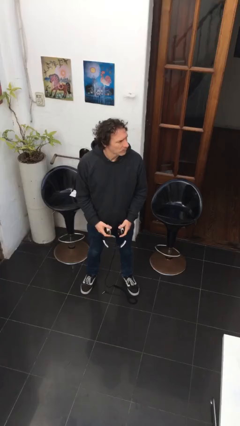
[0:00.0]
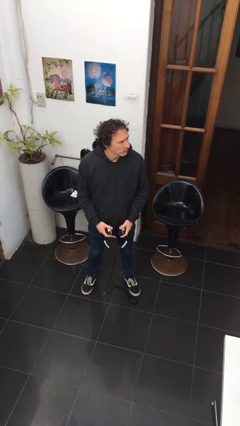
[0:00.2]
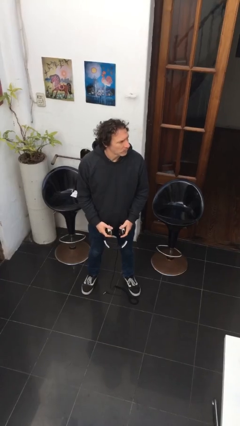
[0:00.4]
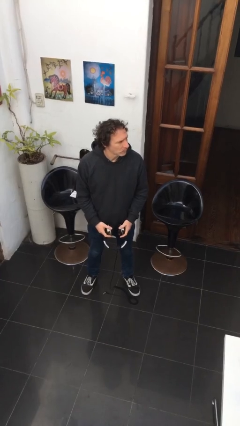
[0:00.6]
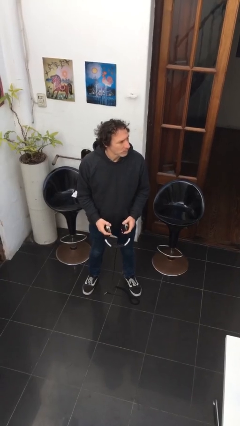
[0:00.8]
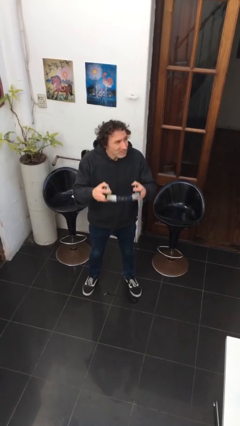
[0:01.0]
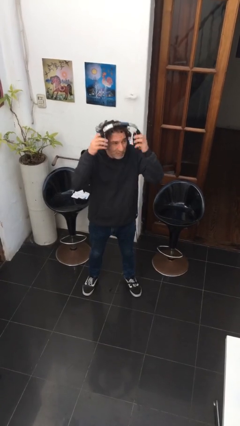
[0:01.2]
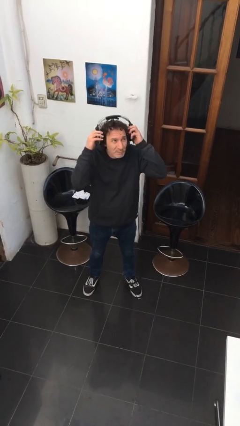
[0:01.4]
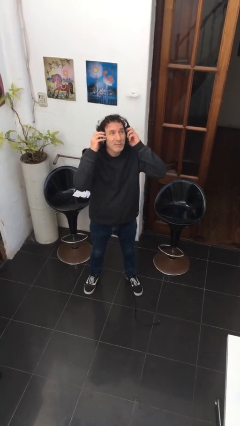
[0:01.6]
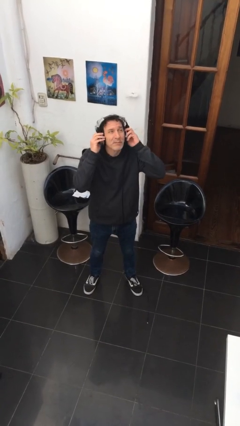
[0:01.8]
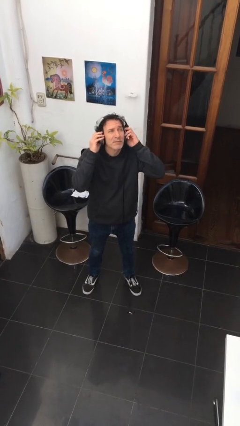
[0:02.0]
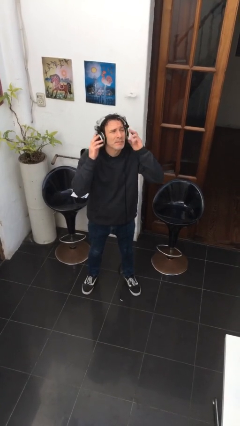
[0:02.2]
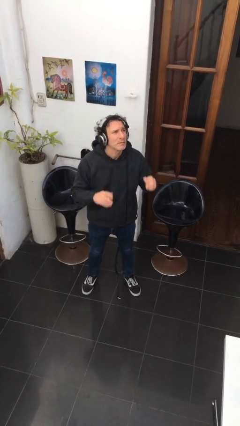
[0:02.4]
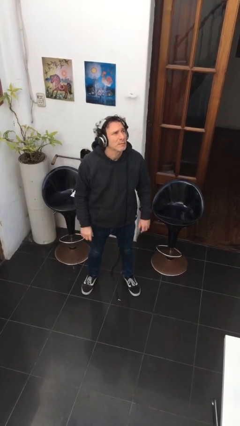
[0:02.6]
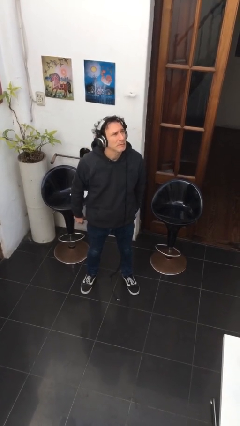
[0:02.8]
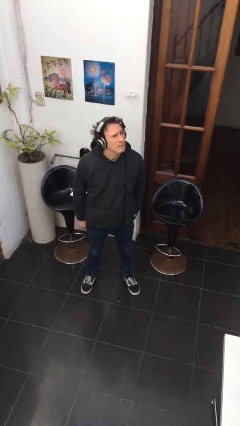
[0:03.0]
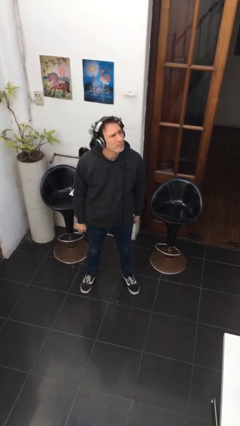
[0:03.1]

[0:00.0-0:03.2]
person puts on headphones

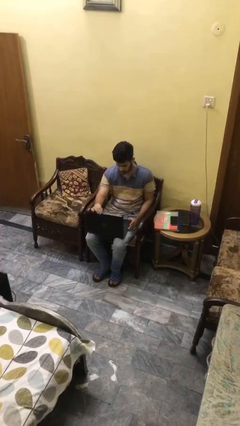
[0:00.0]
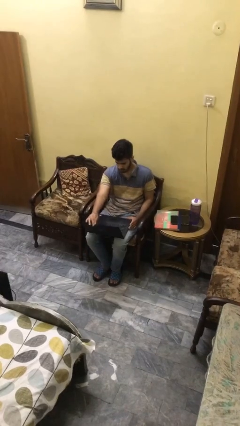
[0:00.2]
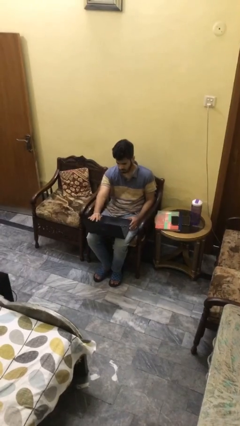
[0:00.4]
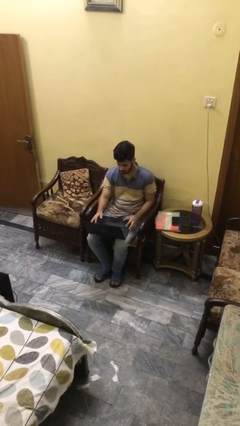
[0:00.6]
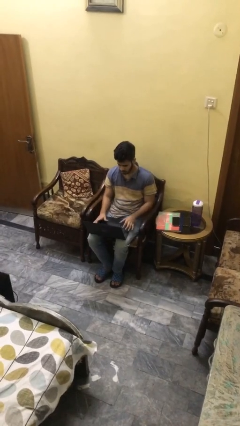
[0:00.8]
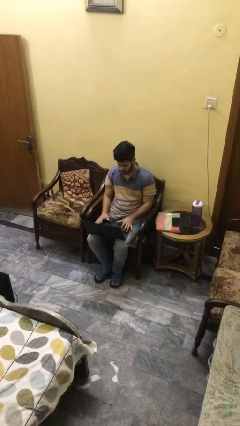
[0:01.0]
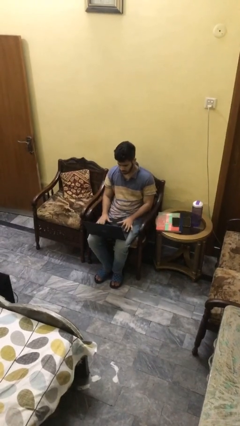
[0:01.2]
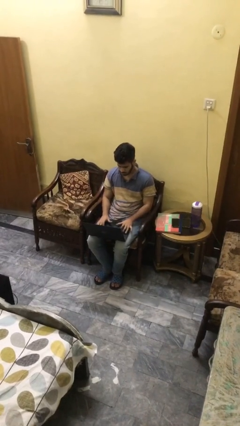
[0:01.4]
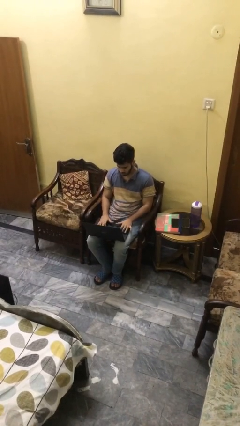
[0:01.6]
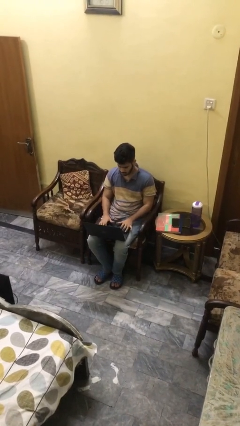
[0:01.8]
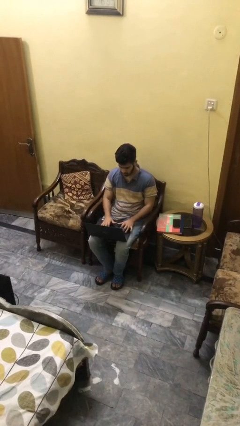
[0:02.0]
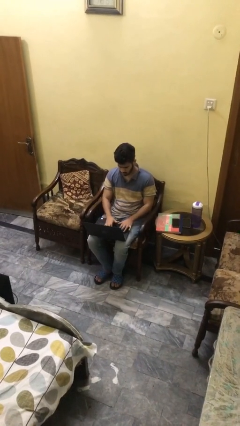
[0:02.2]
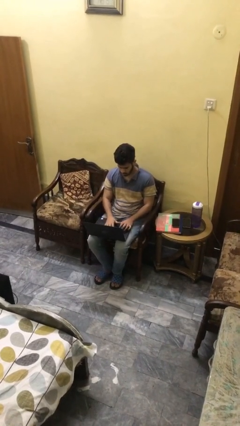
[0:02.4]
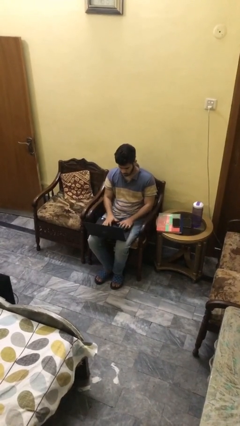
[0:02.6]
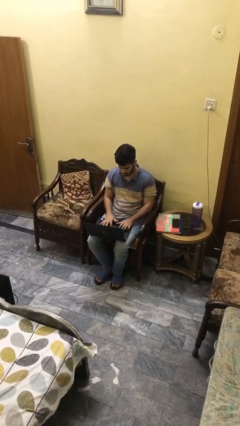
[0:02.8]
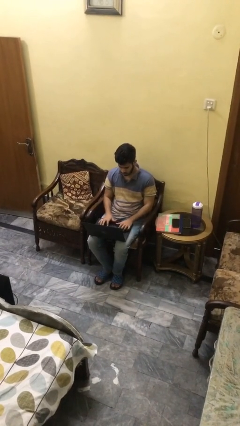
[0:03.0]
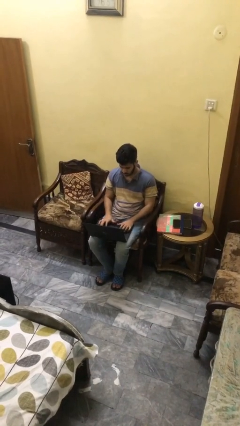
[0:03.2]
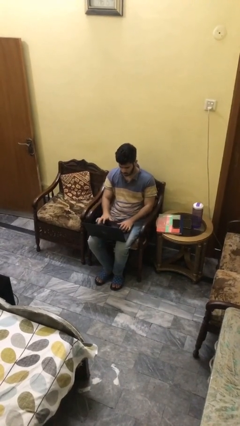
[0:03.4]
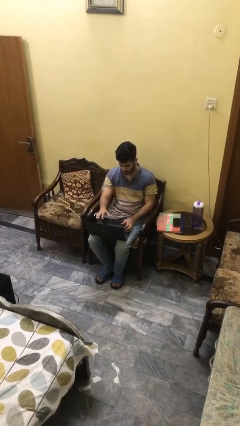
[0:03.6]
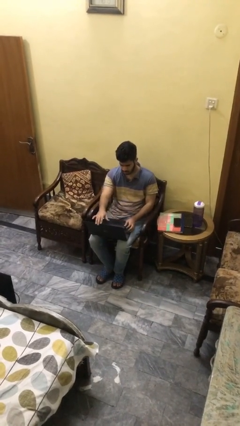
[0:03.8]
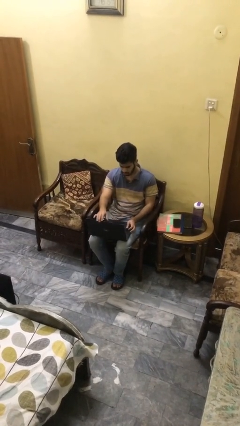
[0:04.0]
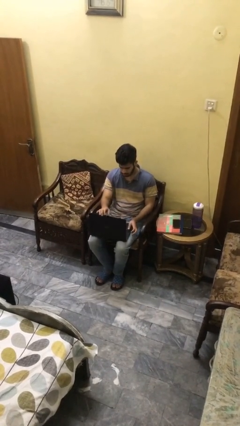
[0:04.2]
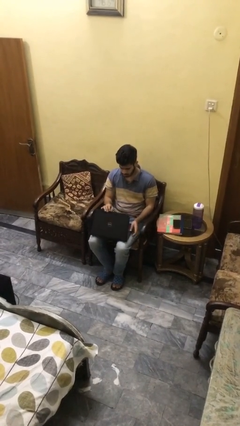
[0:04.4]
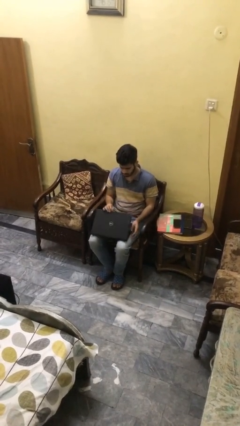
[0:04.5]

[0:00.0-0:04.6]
person interacts with laptop

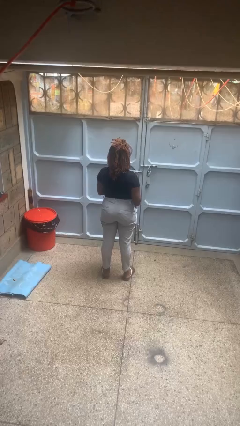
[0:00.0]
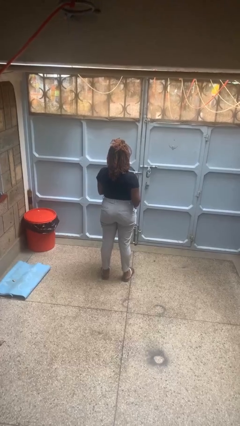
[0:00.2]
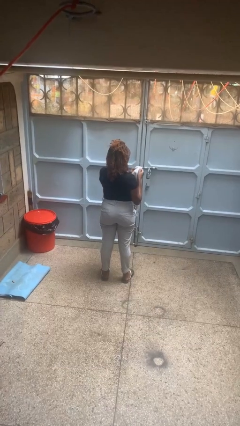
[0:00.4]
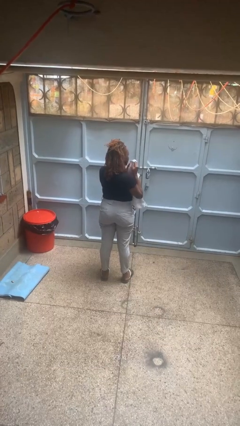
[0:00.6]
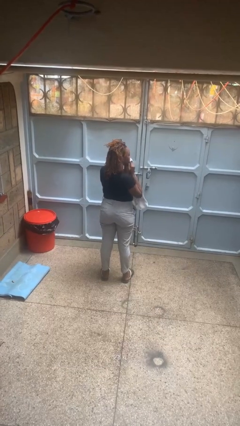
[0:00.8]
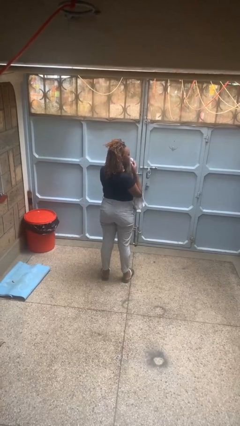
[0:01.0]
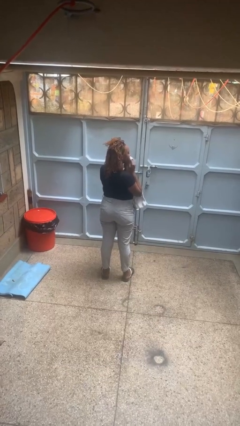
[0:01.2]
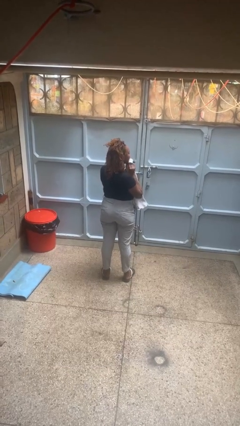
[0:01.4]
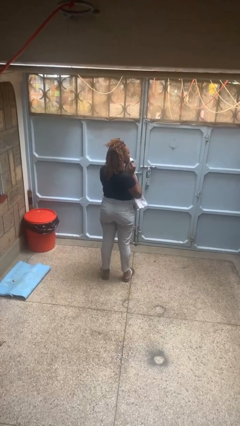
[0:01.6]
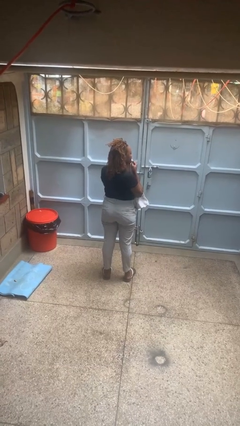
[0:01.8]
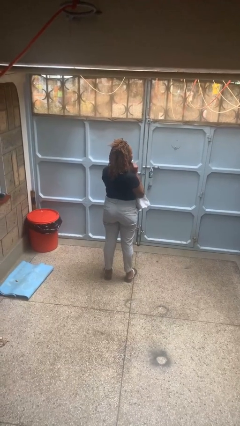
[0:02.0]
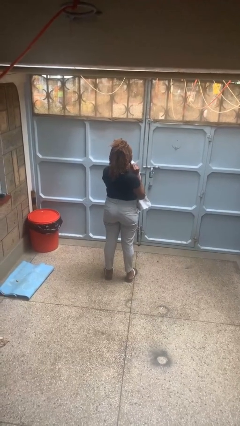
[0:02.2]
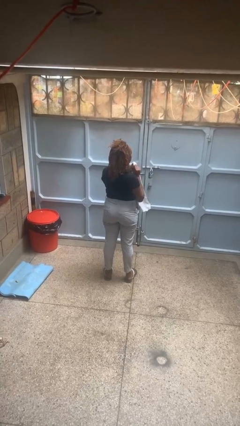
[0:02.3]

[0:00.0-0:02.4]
person wipes mouth with napkin

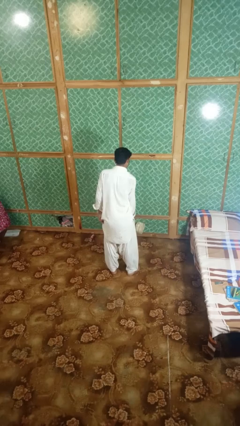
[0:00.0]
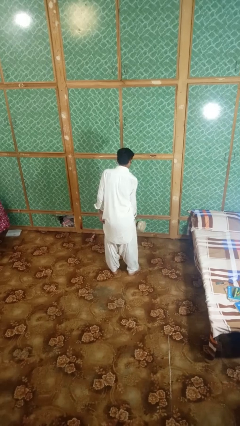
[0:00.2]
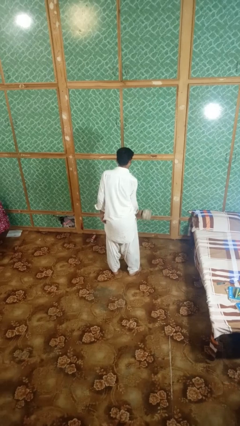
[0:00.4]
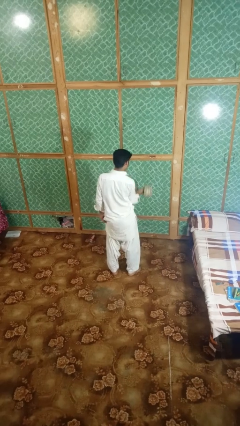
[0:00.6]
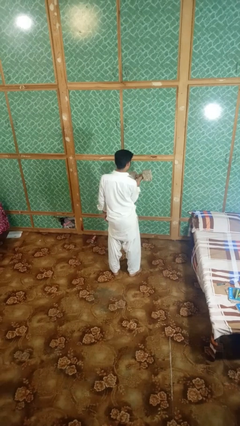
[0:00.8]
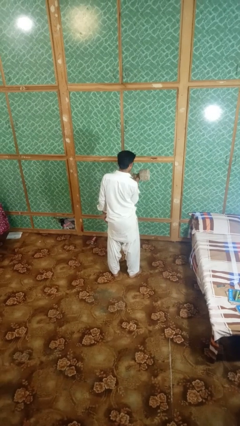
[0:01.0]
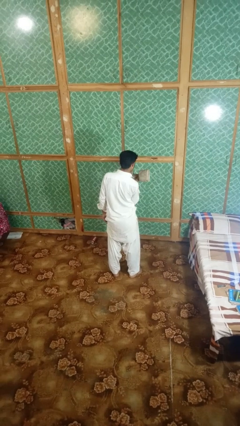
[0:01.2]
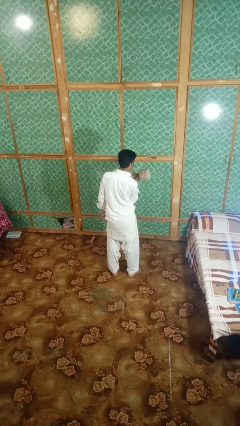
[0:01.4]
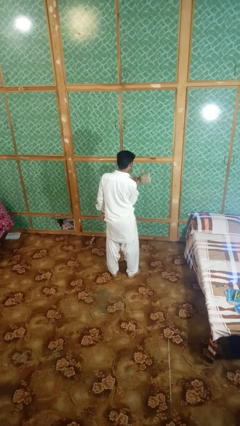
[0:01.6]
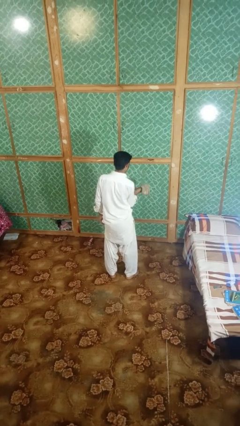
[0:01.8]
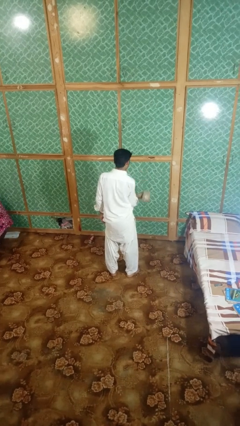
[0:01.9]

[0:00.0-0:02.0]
person lifts dumbbells

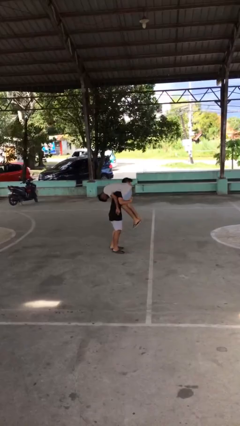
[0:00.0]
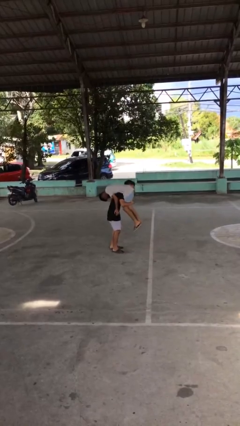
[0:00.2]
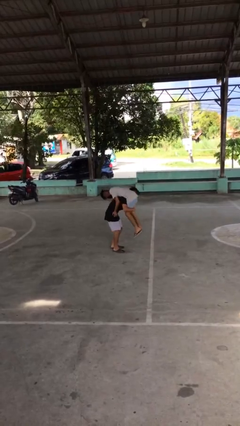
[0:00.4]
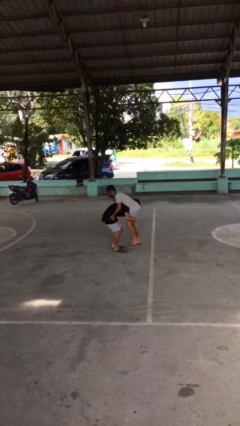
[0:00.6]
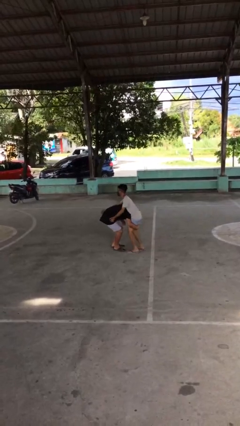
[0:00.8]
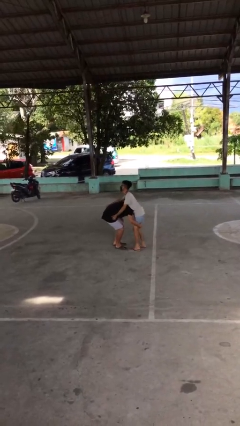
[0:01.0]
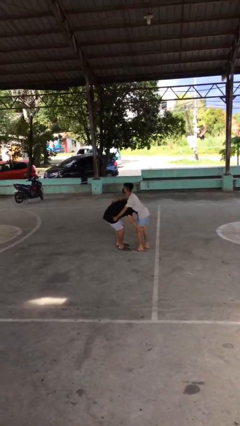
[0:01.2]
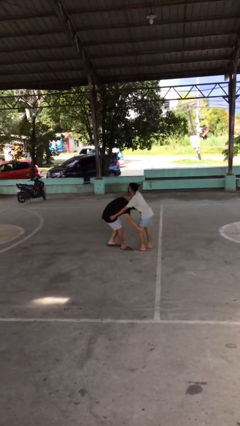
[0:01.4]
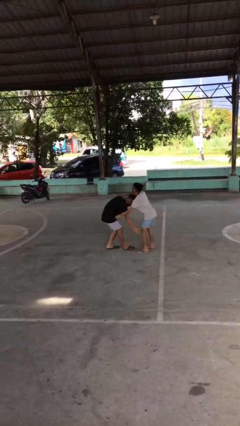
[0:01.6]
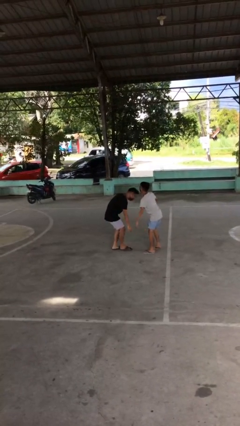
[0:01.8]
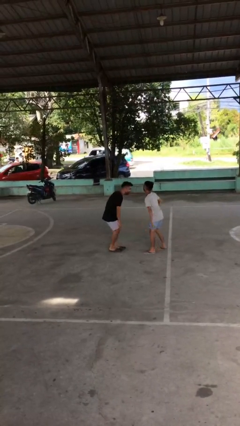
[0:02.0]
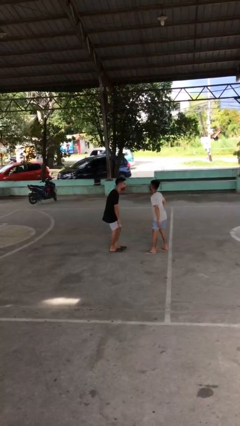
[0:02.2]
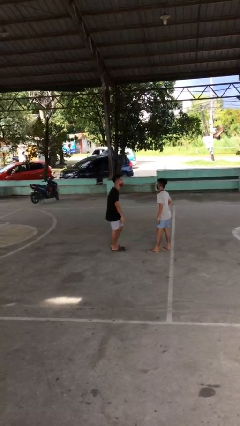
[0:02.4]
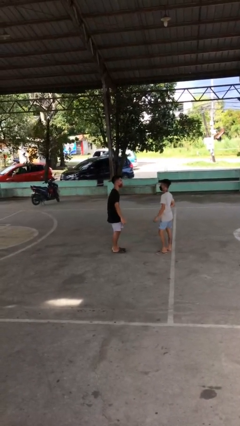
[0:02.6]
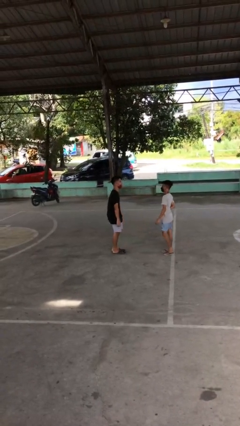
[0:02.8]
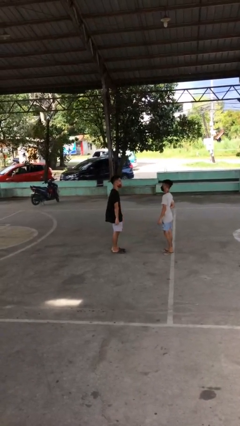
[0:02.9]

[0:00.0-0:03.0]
person puts down person

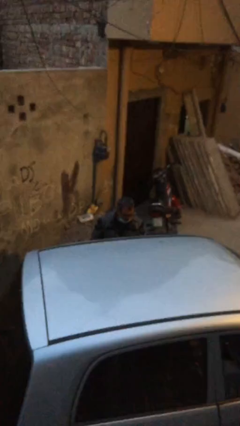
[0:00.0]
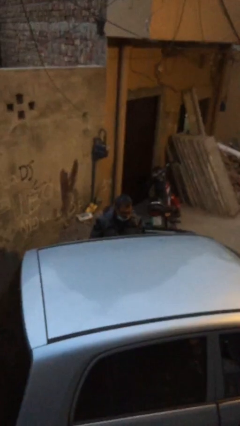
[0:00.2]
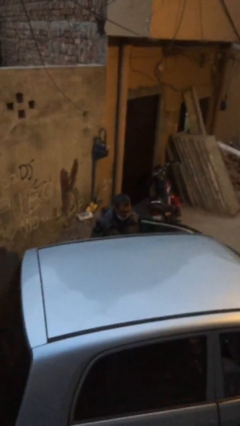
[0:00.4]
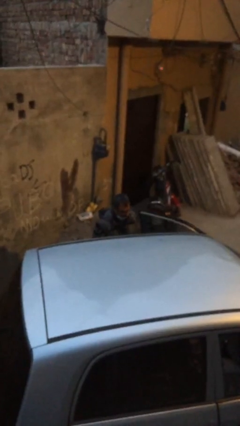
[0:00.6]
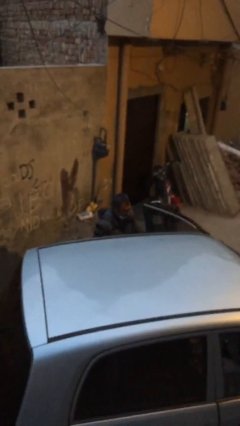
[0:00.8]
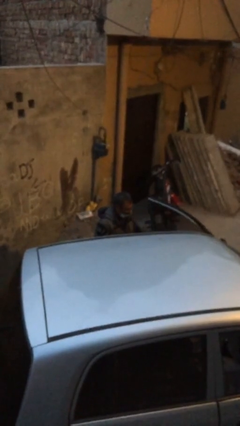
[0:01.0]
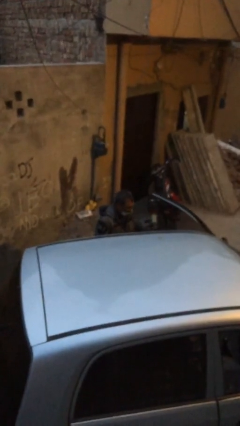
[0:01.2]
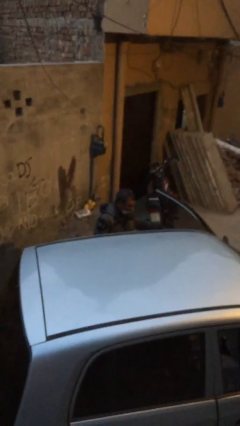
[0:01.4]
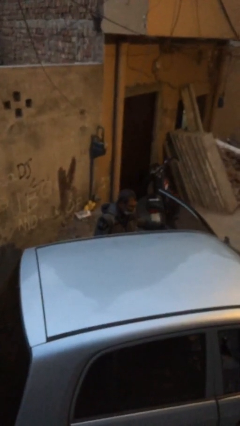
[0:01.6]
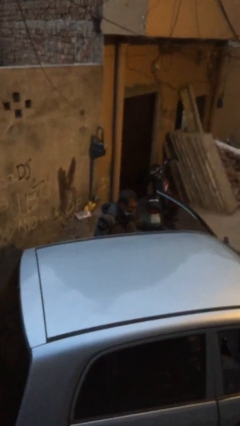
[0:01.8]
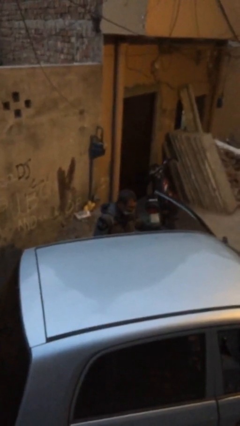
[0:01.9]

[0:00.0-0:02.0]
person opens car door
